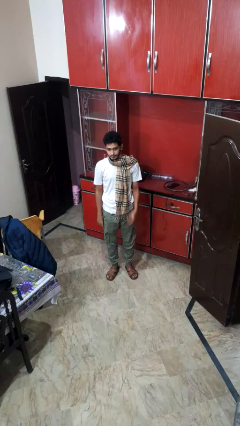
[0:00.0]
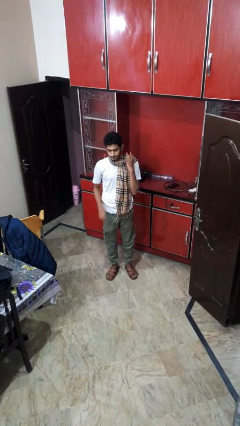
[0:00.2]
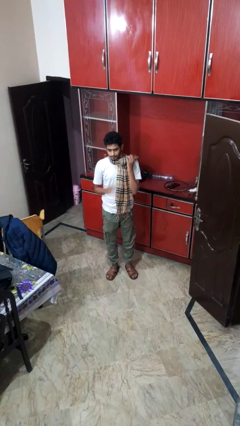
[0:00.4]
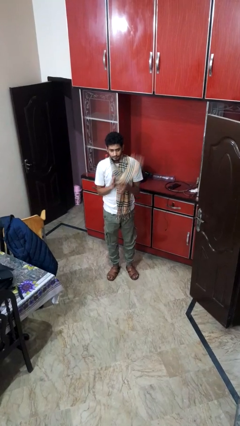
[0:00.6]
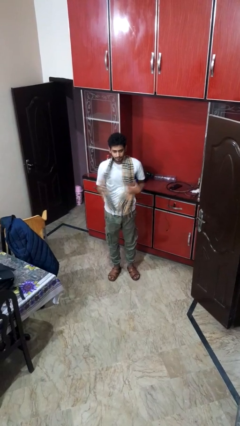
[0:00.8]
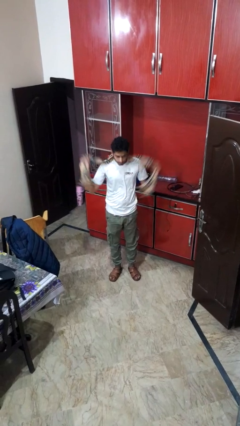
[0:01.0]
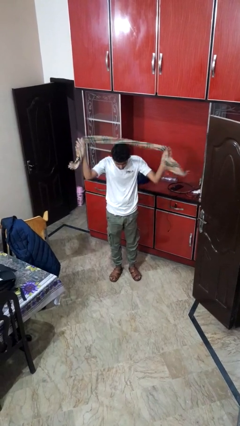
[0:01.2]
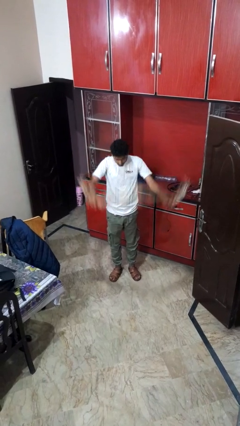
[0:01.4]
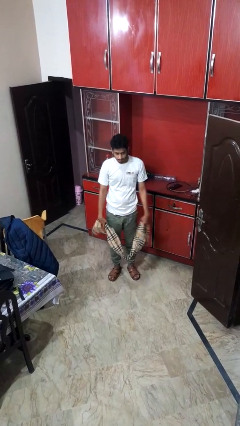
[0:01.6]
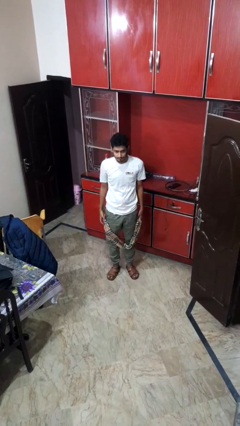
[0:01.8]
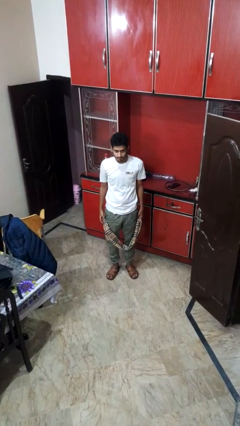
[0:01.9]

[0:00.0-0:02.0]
person takes off scarf

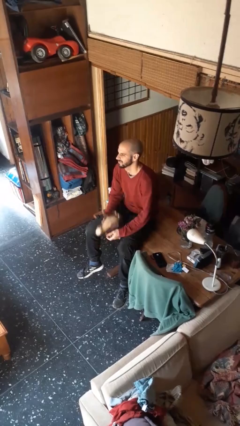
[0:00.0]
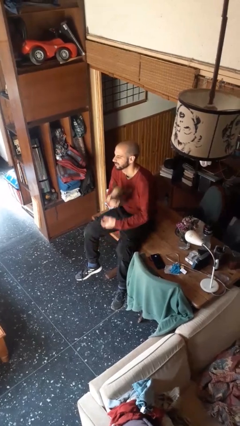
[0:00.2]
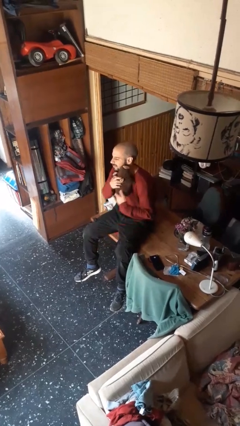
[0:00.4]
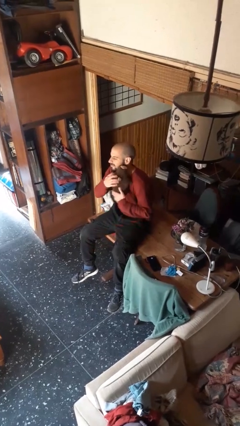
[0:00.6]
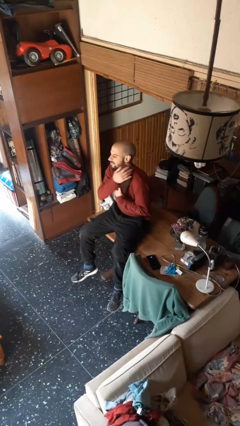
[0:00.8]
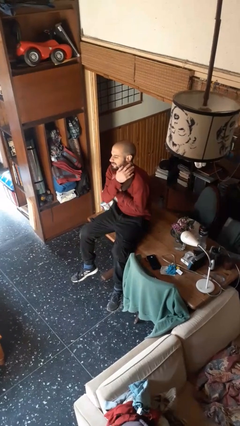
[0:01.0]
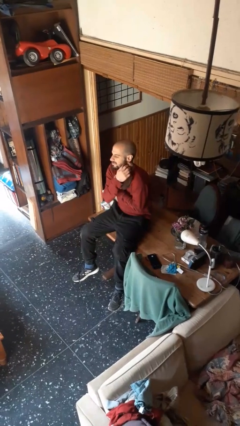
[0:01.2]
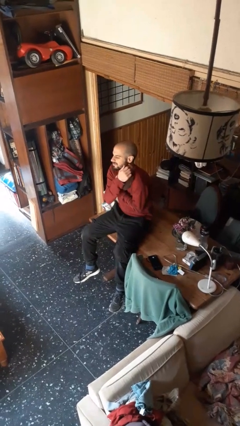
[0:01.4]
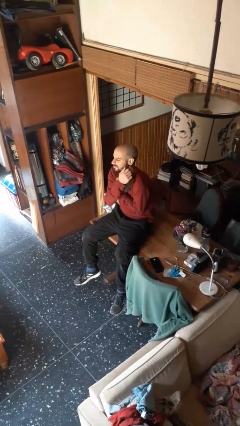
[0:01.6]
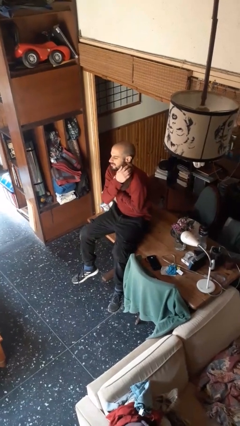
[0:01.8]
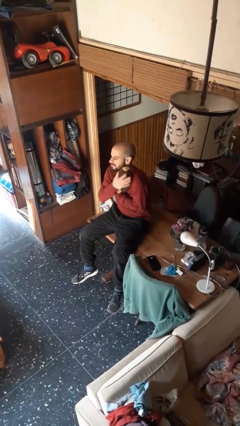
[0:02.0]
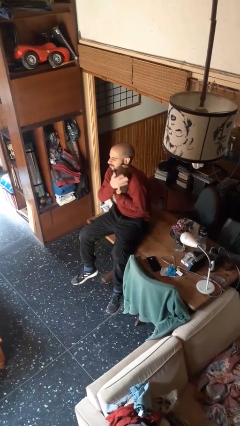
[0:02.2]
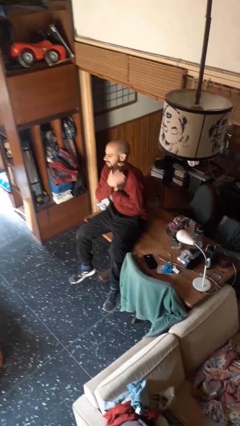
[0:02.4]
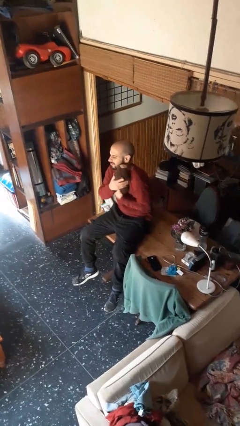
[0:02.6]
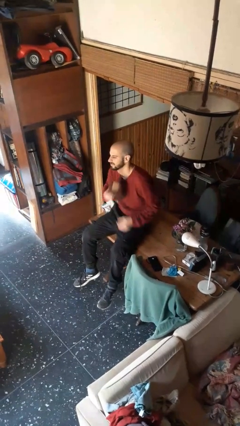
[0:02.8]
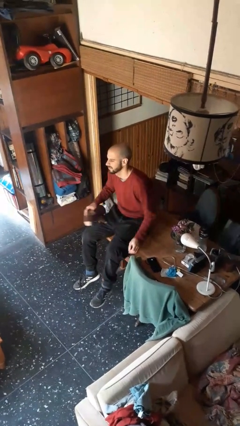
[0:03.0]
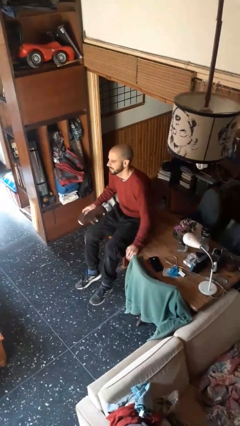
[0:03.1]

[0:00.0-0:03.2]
person hugs stuffed animal

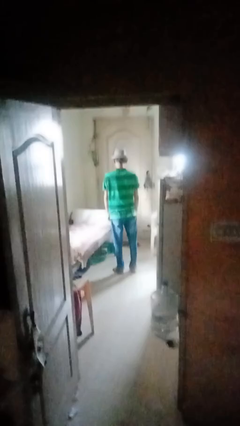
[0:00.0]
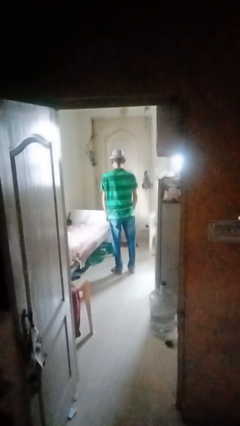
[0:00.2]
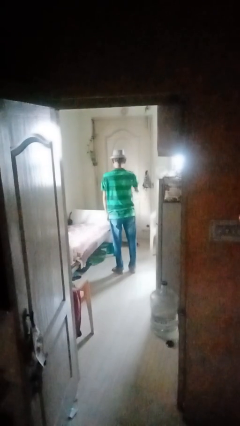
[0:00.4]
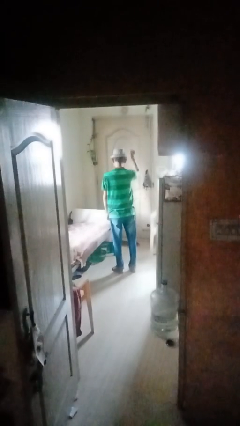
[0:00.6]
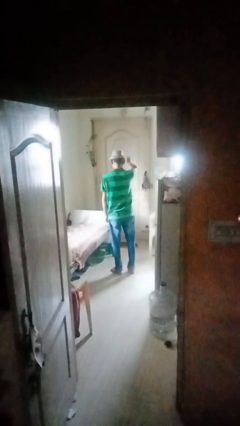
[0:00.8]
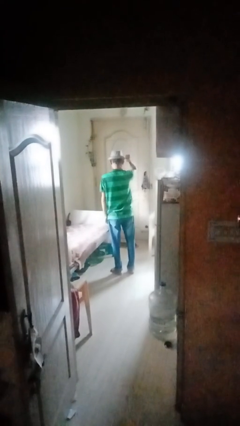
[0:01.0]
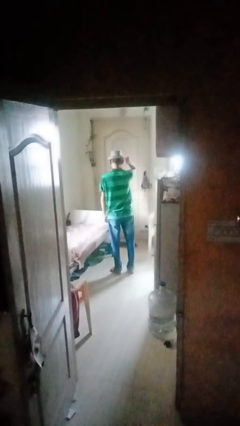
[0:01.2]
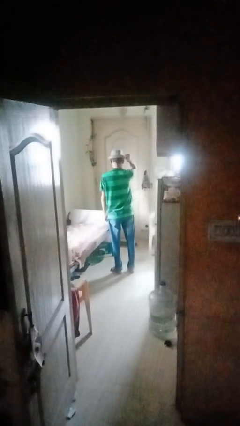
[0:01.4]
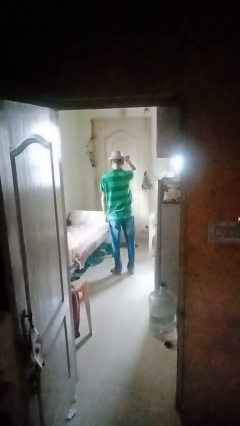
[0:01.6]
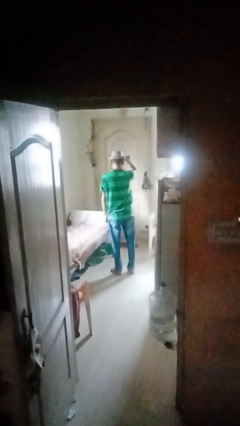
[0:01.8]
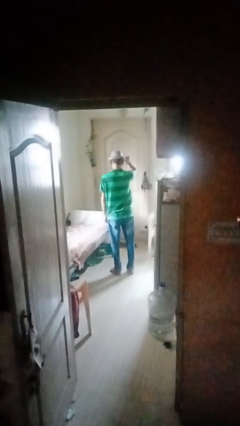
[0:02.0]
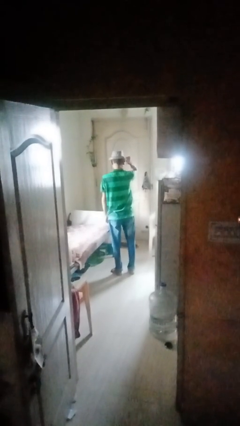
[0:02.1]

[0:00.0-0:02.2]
person gestures behind me

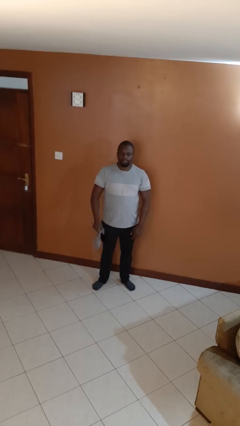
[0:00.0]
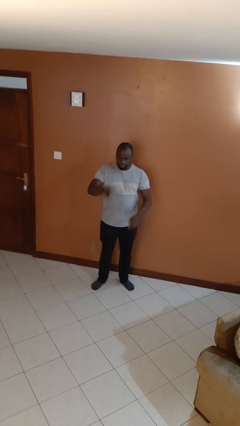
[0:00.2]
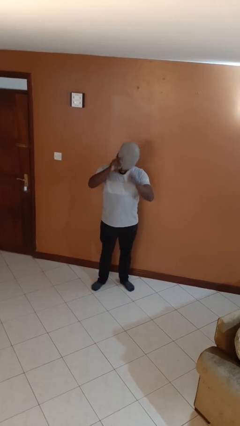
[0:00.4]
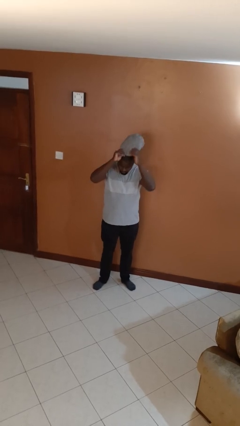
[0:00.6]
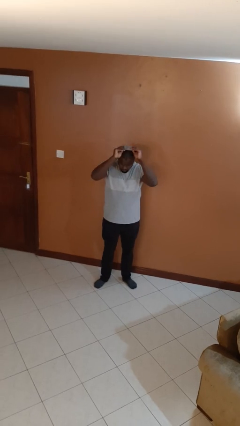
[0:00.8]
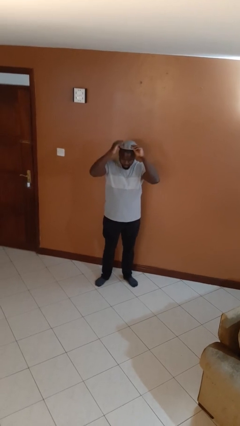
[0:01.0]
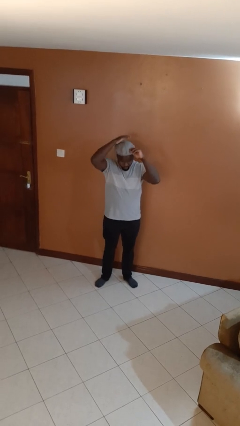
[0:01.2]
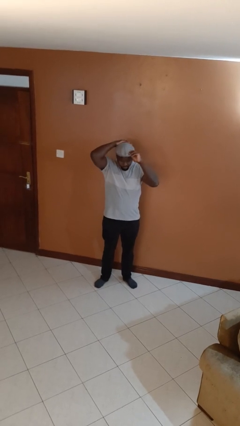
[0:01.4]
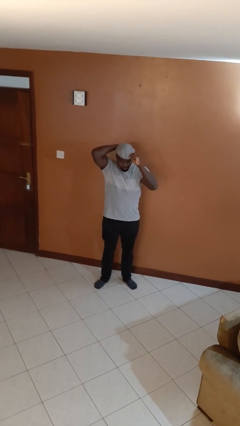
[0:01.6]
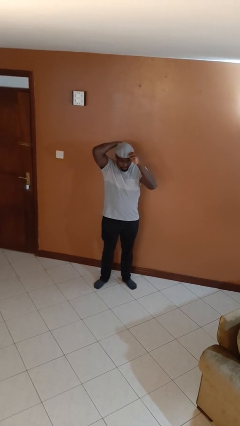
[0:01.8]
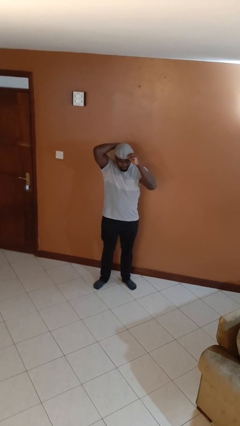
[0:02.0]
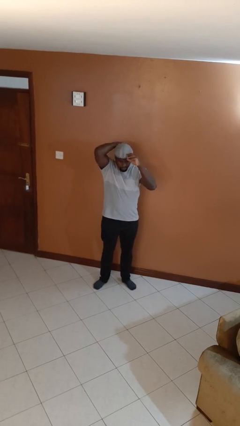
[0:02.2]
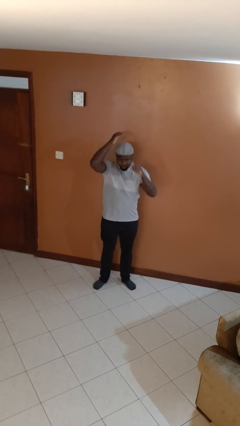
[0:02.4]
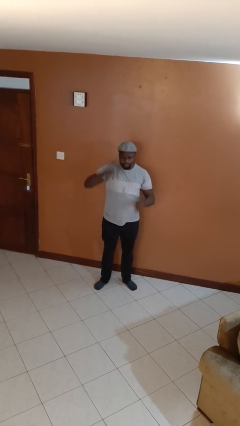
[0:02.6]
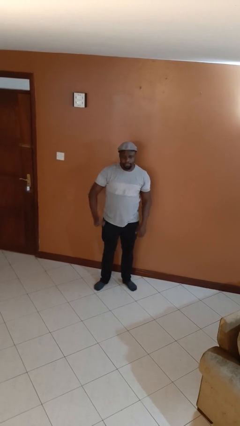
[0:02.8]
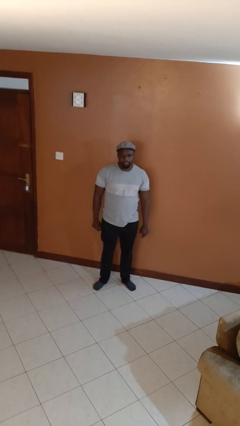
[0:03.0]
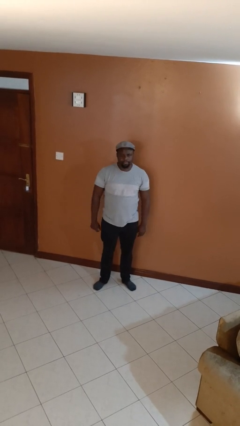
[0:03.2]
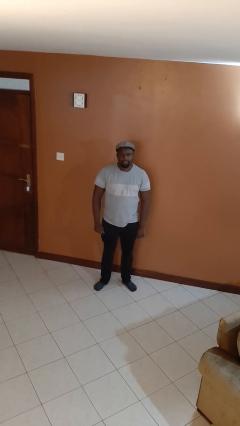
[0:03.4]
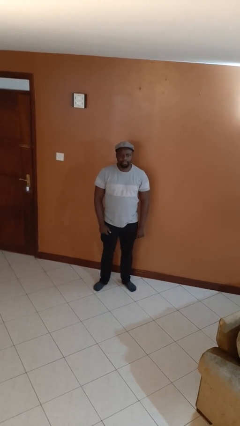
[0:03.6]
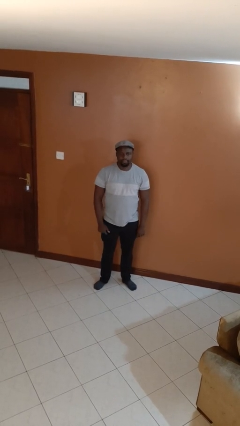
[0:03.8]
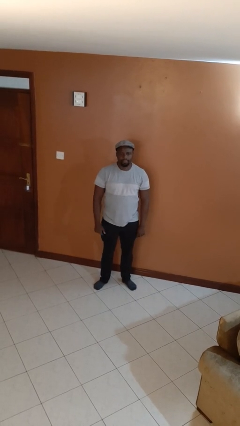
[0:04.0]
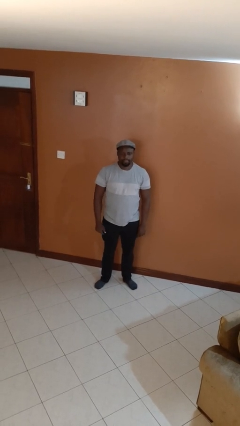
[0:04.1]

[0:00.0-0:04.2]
person puts on hat

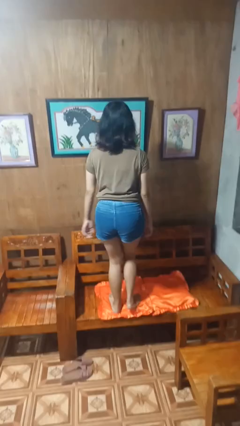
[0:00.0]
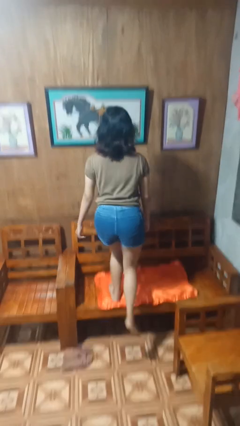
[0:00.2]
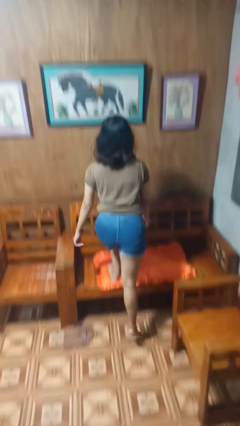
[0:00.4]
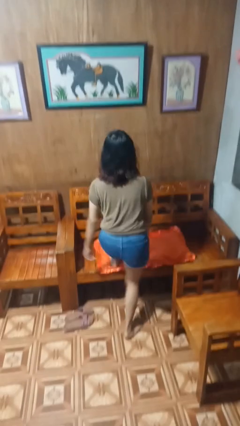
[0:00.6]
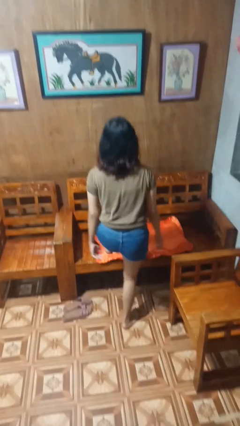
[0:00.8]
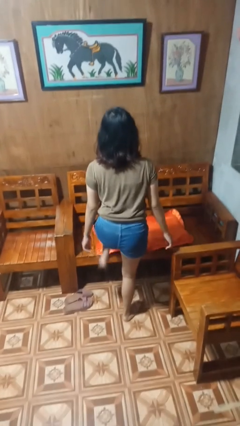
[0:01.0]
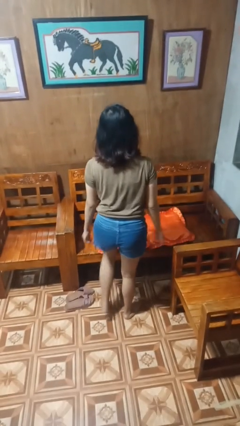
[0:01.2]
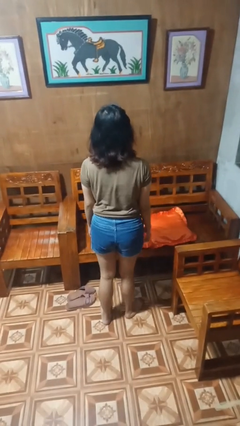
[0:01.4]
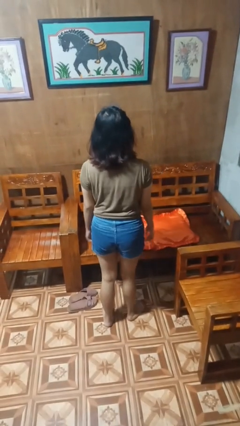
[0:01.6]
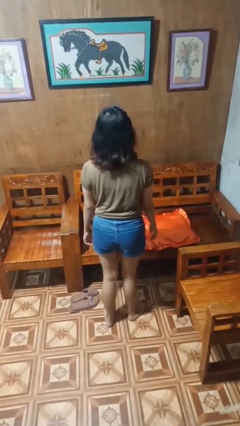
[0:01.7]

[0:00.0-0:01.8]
person climbs off couch

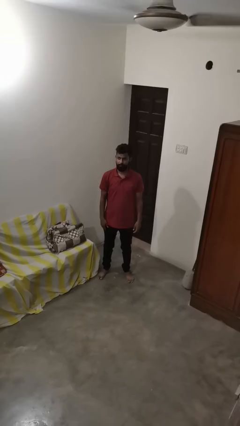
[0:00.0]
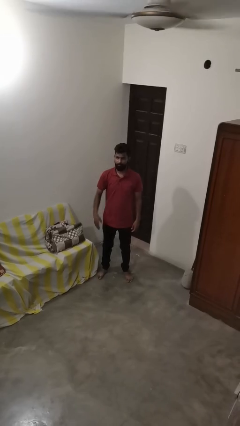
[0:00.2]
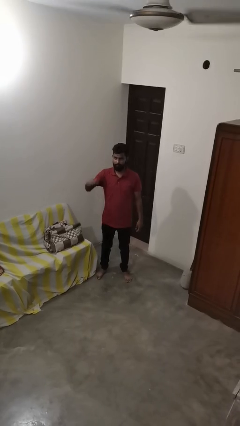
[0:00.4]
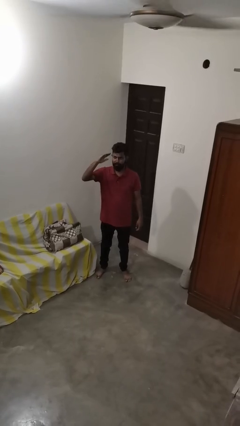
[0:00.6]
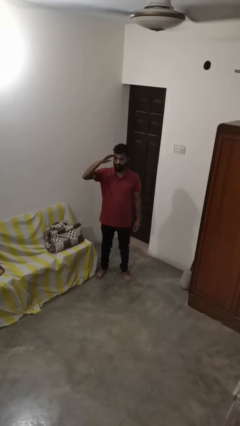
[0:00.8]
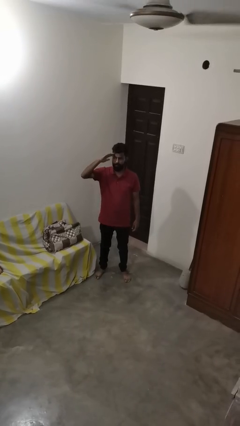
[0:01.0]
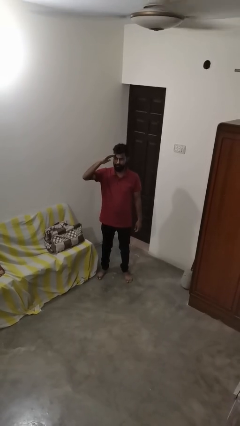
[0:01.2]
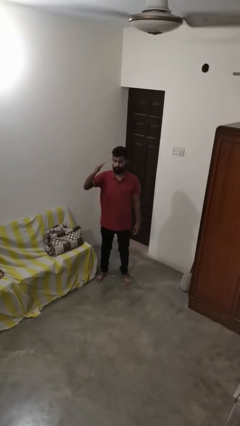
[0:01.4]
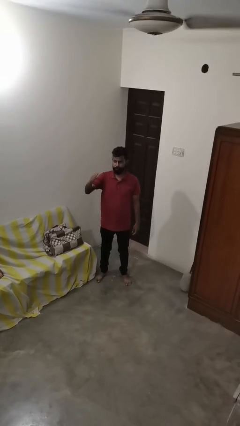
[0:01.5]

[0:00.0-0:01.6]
person salutes

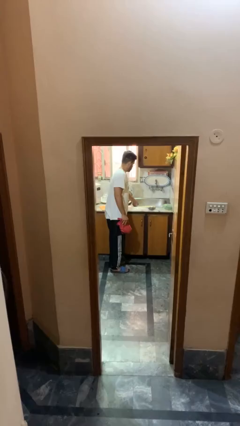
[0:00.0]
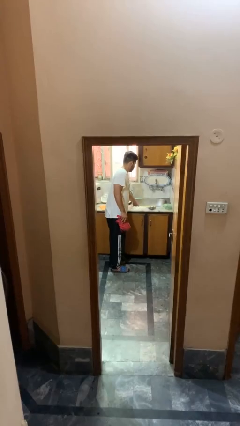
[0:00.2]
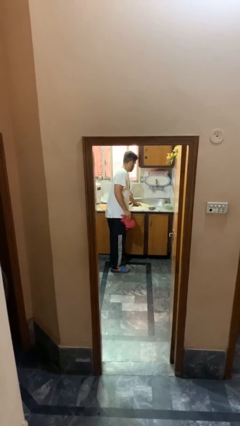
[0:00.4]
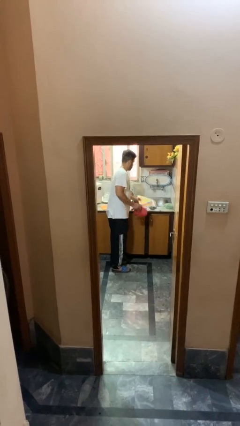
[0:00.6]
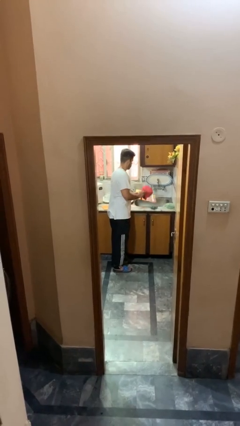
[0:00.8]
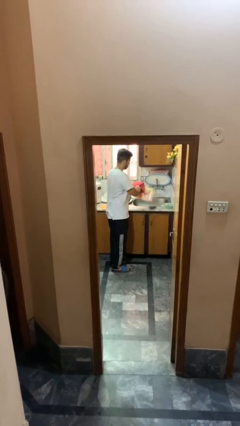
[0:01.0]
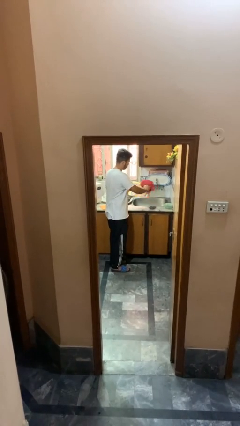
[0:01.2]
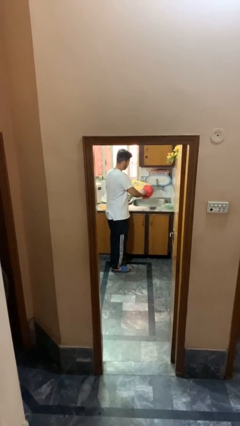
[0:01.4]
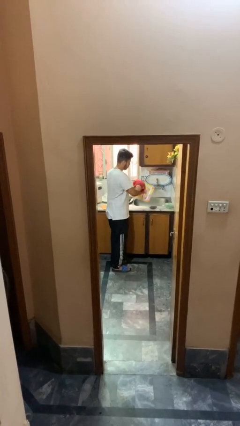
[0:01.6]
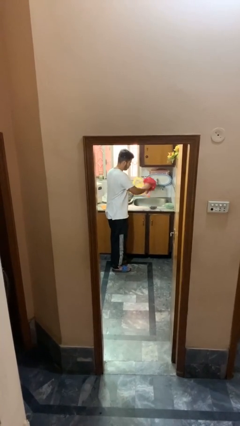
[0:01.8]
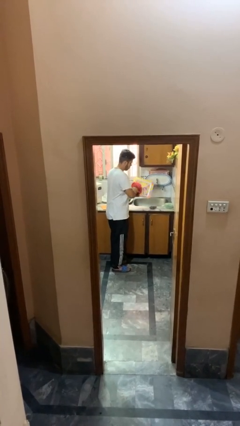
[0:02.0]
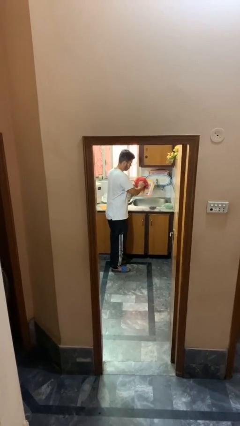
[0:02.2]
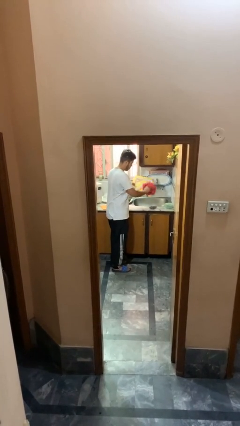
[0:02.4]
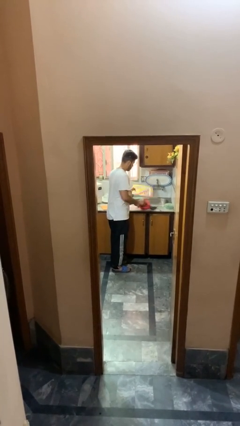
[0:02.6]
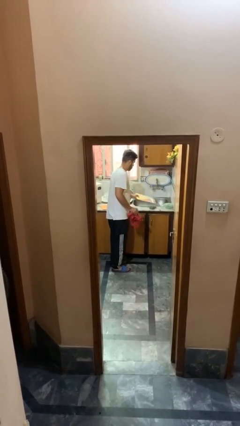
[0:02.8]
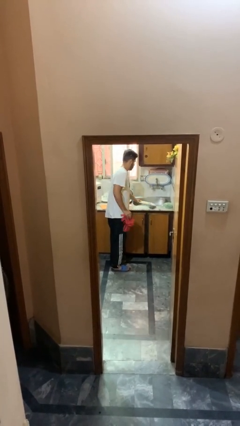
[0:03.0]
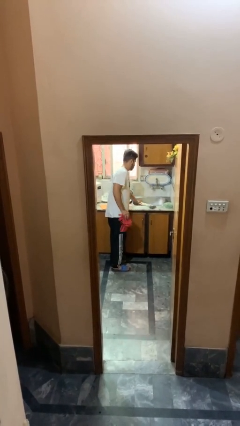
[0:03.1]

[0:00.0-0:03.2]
person dries dish
